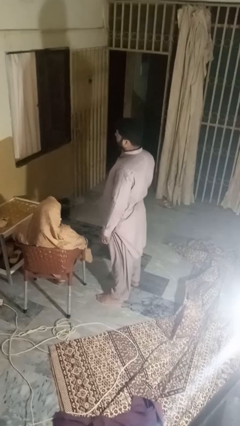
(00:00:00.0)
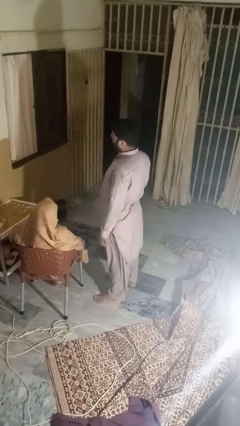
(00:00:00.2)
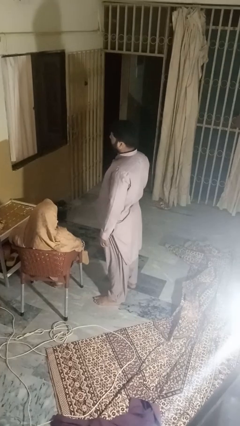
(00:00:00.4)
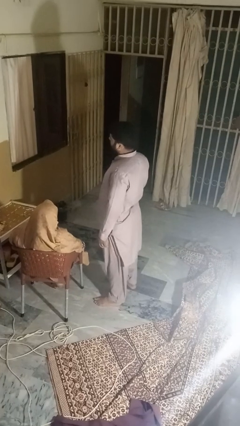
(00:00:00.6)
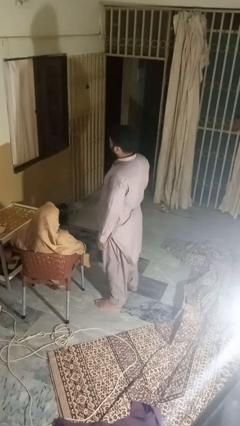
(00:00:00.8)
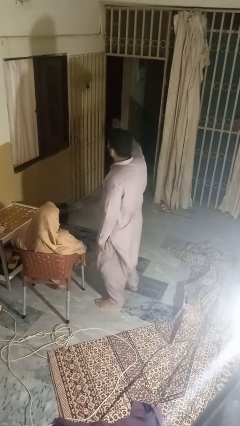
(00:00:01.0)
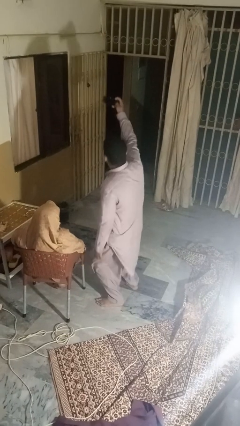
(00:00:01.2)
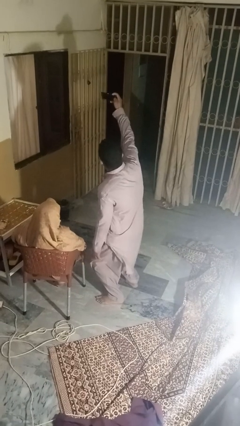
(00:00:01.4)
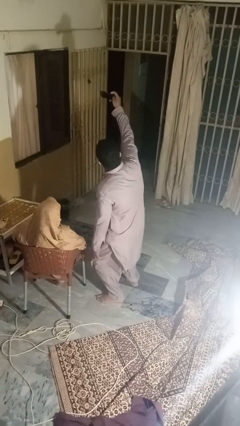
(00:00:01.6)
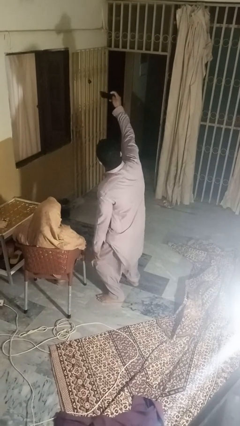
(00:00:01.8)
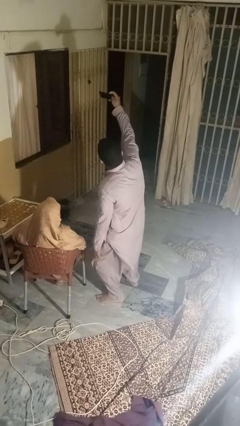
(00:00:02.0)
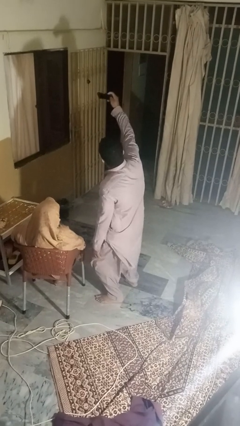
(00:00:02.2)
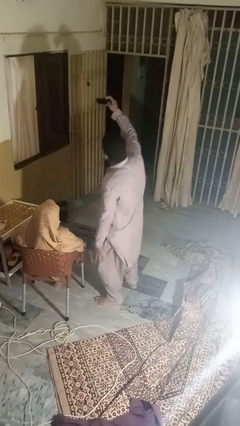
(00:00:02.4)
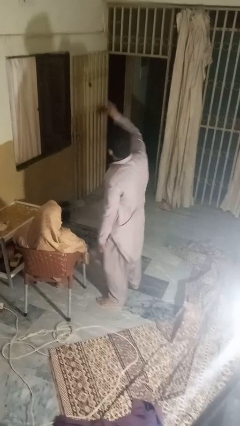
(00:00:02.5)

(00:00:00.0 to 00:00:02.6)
person takes selfie with person

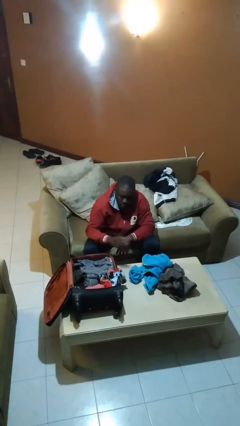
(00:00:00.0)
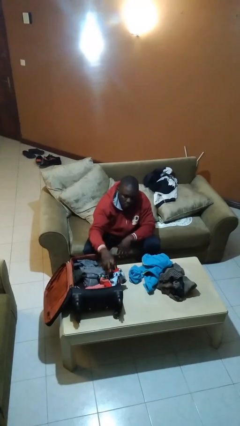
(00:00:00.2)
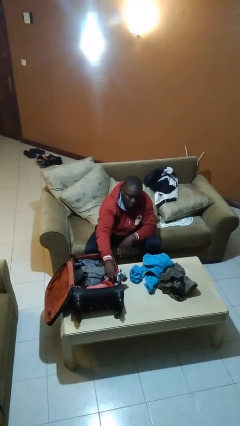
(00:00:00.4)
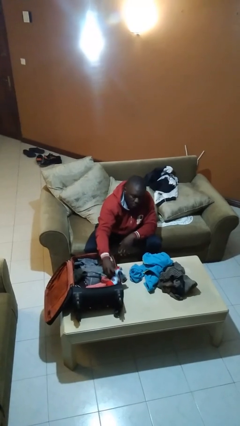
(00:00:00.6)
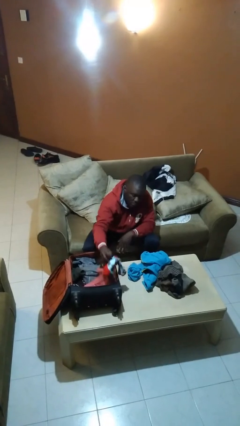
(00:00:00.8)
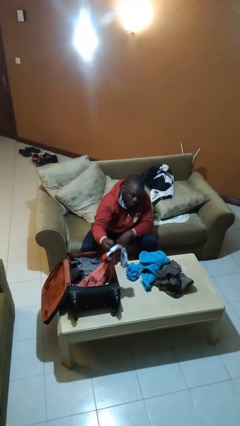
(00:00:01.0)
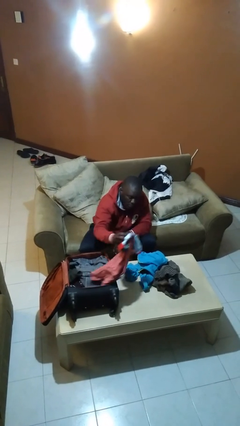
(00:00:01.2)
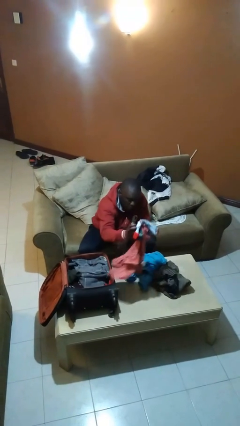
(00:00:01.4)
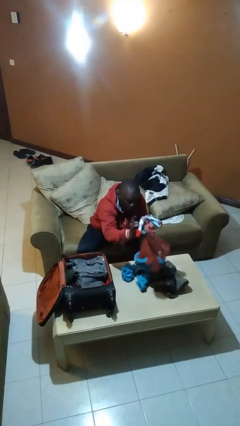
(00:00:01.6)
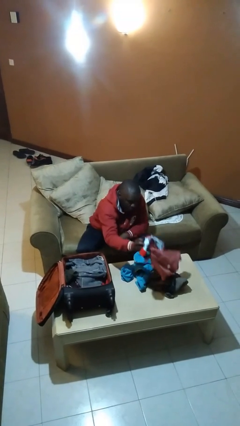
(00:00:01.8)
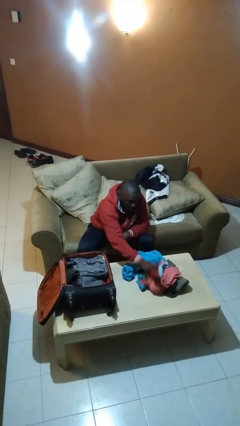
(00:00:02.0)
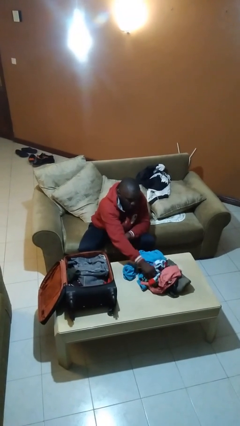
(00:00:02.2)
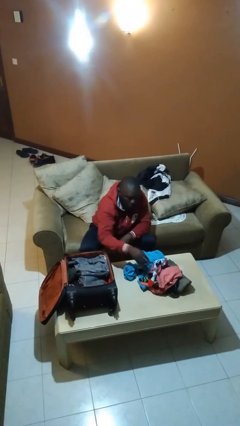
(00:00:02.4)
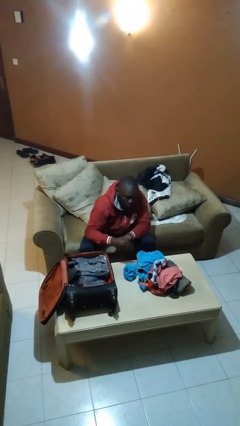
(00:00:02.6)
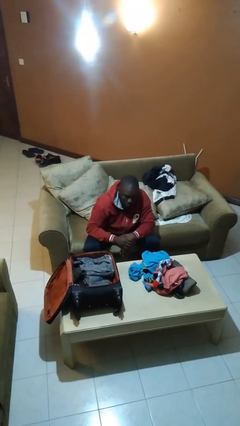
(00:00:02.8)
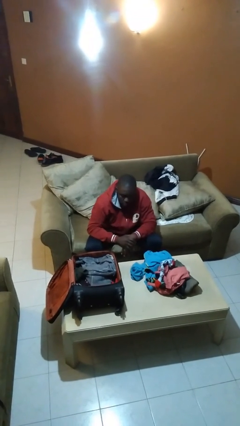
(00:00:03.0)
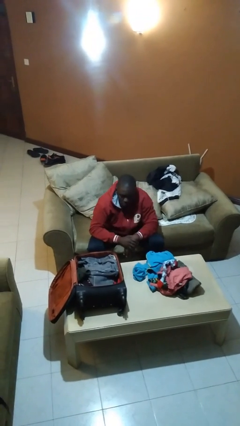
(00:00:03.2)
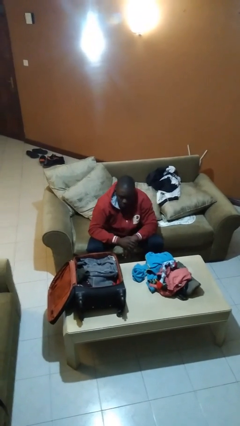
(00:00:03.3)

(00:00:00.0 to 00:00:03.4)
person unloads clothes from suitcase

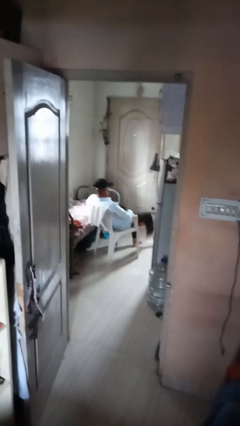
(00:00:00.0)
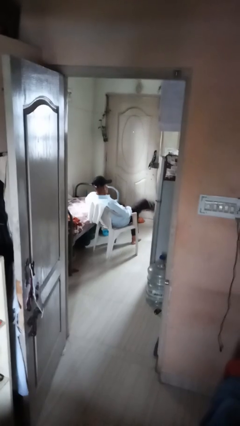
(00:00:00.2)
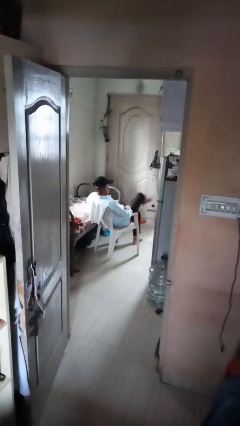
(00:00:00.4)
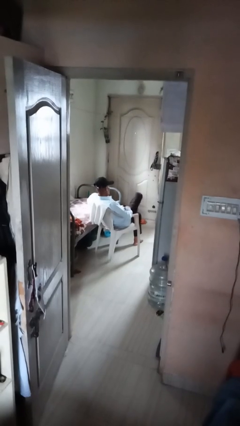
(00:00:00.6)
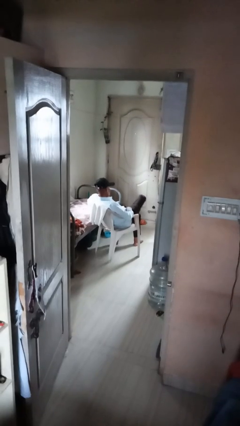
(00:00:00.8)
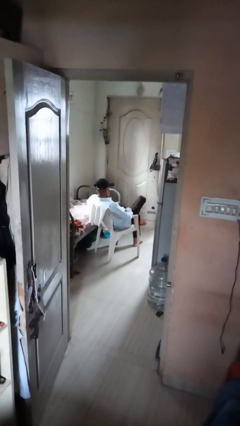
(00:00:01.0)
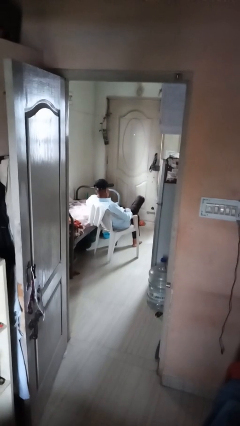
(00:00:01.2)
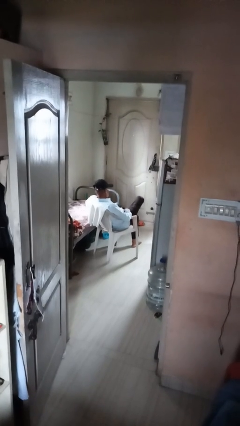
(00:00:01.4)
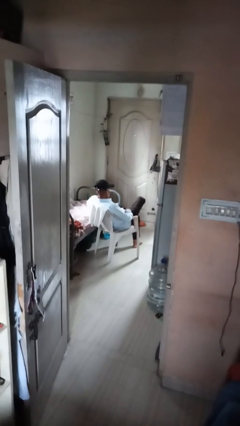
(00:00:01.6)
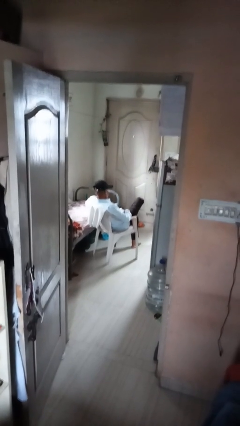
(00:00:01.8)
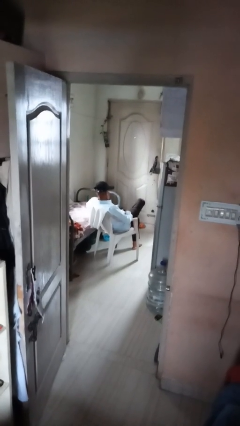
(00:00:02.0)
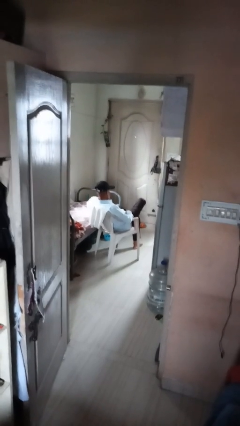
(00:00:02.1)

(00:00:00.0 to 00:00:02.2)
person crosses legs

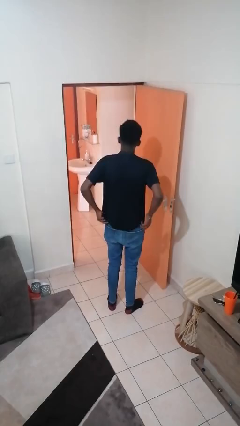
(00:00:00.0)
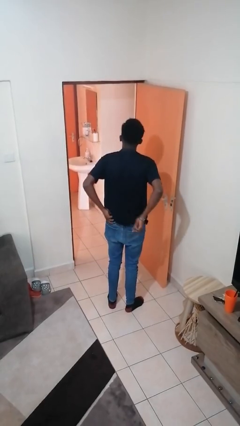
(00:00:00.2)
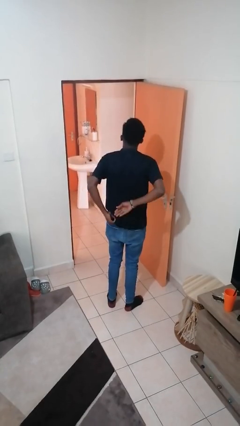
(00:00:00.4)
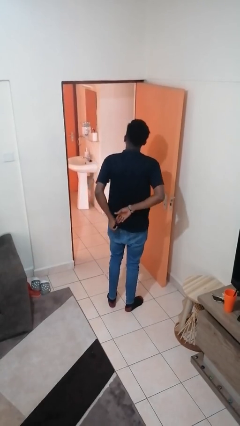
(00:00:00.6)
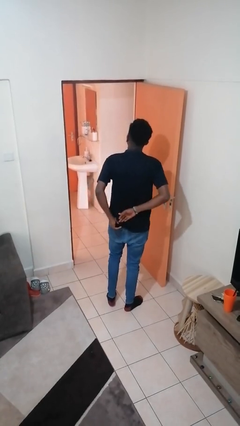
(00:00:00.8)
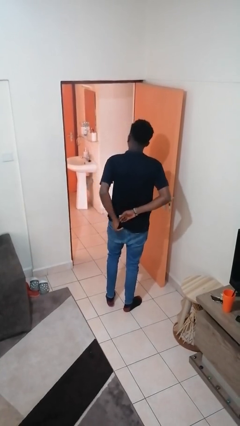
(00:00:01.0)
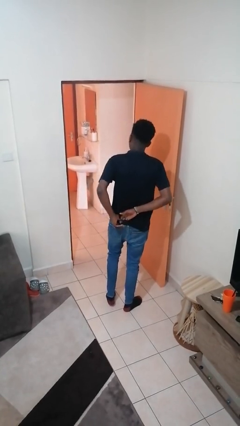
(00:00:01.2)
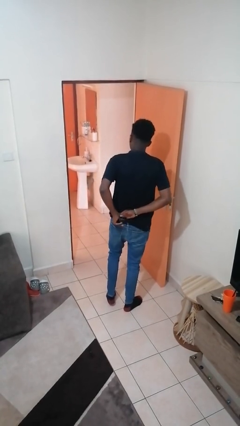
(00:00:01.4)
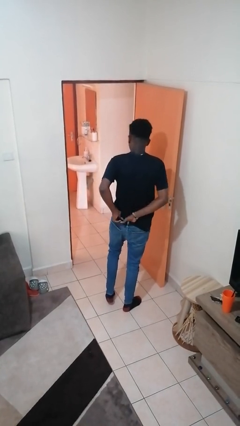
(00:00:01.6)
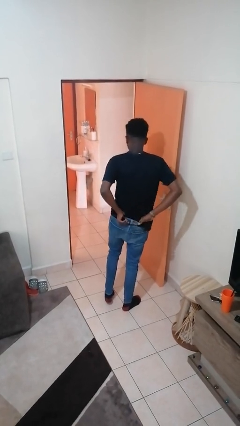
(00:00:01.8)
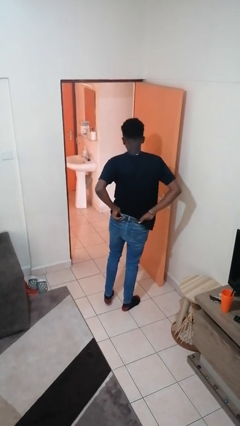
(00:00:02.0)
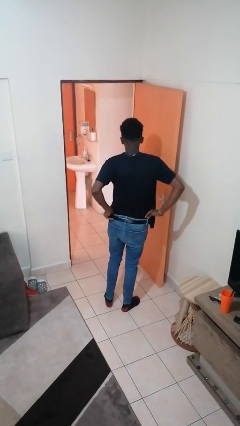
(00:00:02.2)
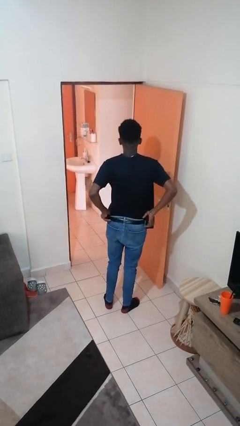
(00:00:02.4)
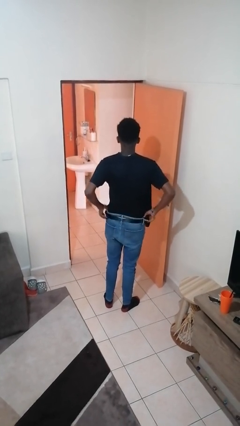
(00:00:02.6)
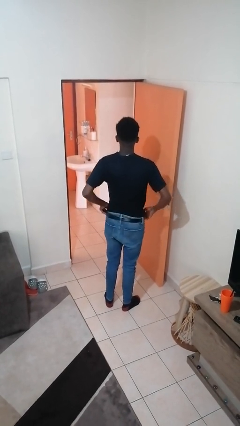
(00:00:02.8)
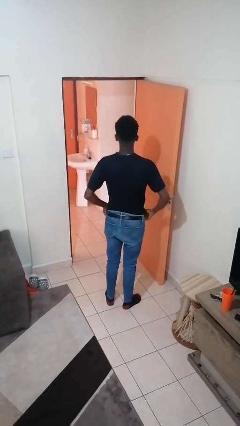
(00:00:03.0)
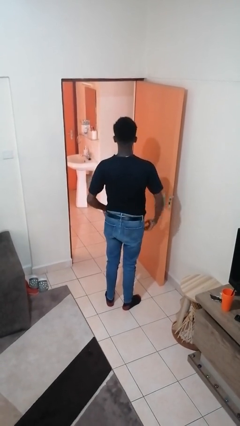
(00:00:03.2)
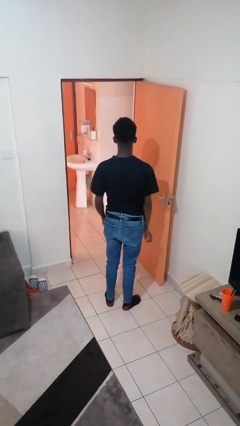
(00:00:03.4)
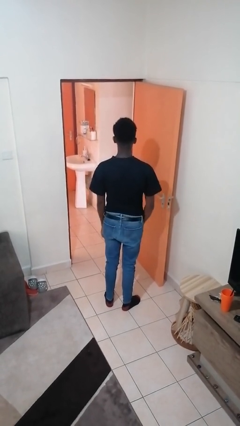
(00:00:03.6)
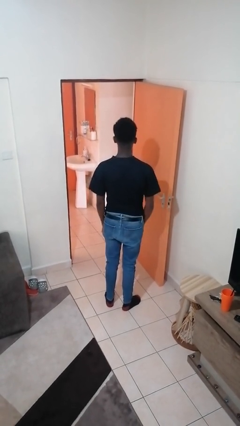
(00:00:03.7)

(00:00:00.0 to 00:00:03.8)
person tucks in shirt

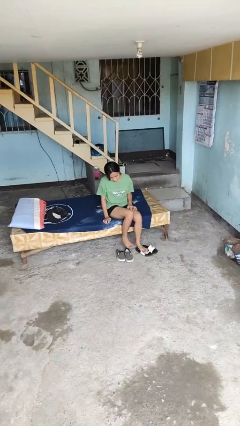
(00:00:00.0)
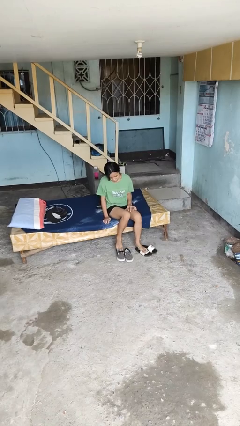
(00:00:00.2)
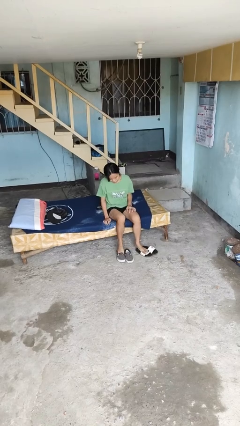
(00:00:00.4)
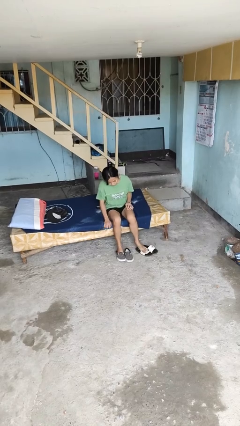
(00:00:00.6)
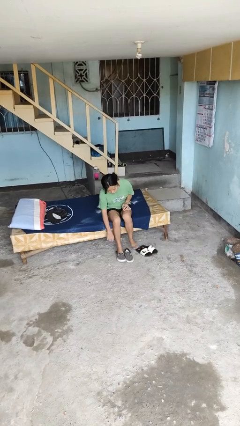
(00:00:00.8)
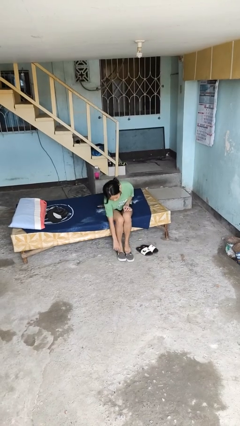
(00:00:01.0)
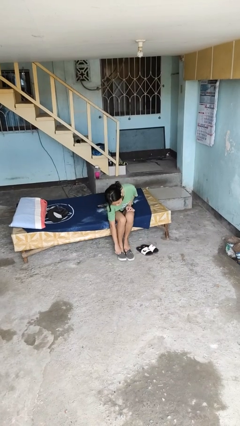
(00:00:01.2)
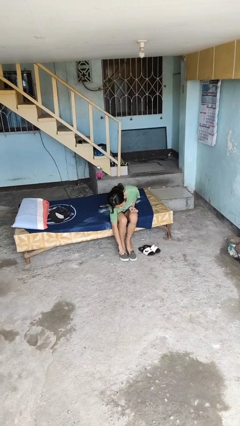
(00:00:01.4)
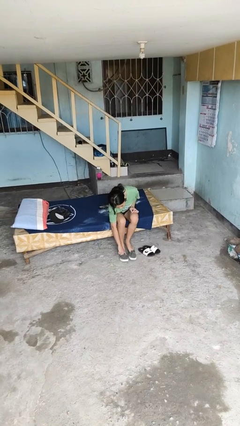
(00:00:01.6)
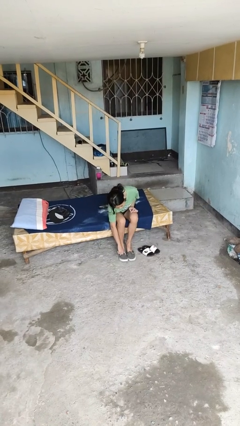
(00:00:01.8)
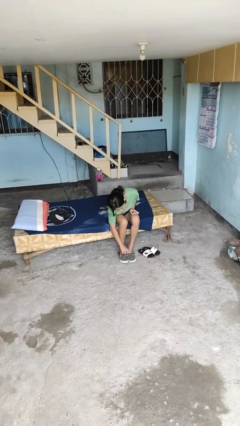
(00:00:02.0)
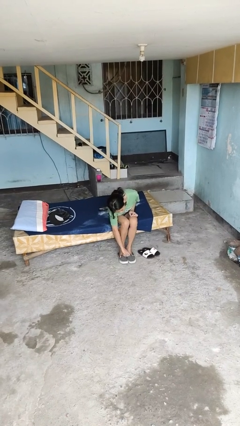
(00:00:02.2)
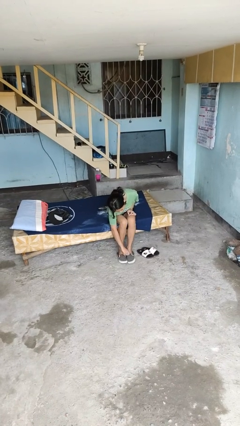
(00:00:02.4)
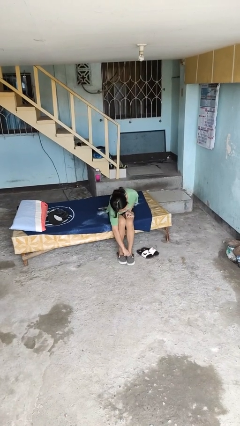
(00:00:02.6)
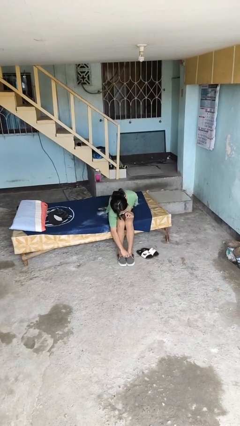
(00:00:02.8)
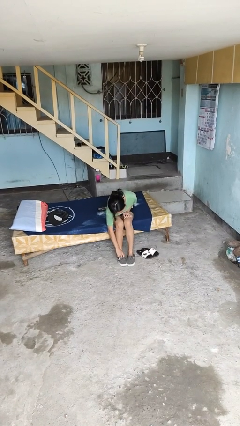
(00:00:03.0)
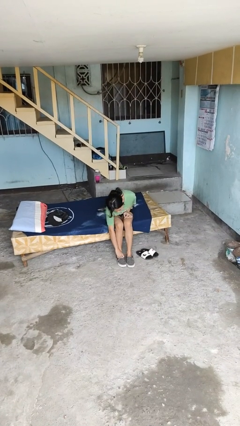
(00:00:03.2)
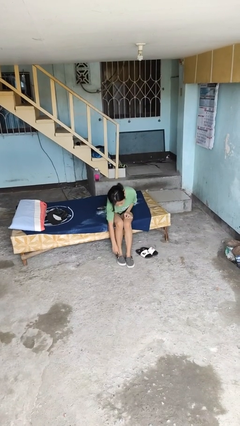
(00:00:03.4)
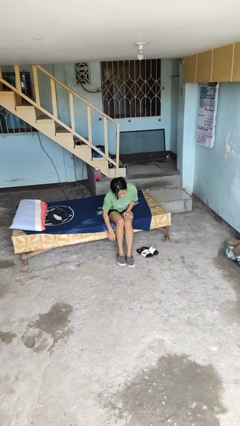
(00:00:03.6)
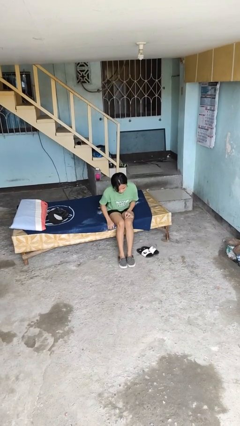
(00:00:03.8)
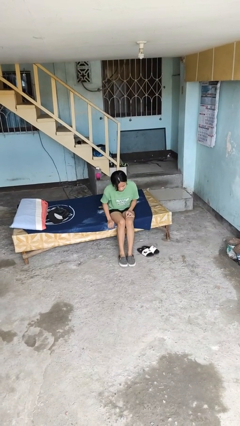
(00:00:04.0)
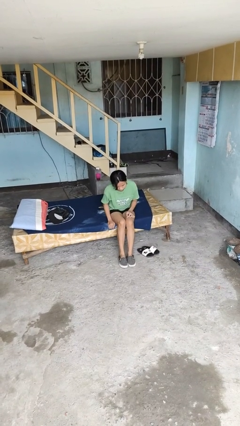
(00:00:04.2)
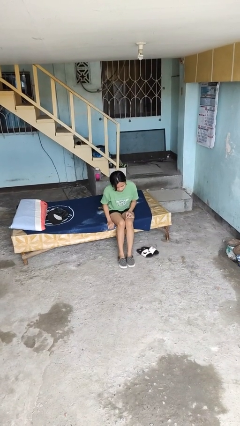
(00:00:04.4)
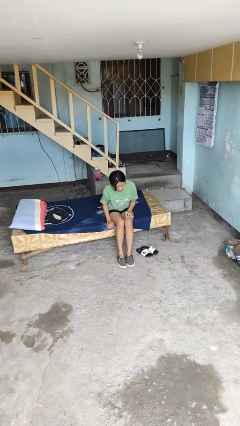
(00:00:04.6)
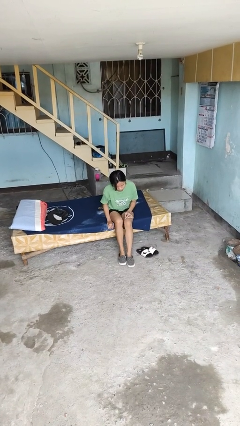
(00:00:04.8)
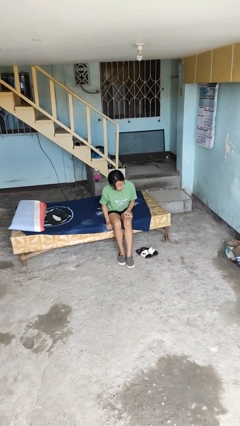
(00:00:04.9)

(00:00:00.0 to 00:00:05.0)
person puts on shoes
